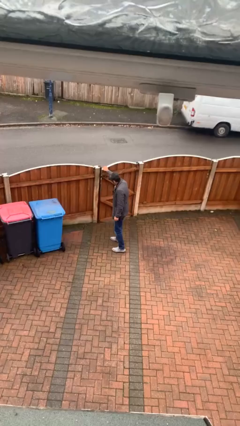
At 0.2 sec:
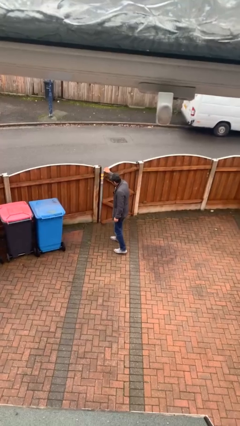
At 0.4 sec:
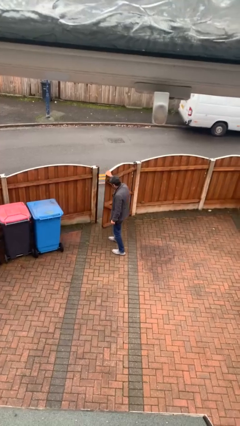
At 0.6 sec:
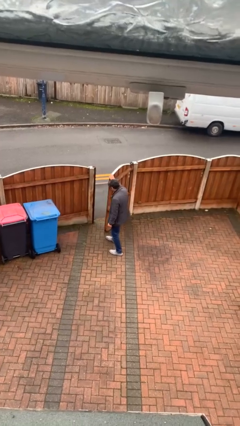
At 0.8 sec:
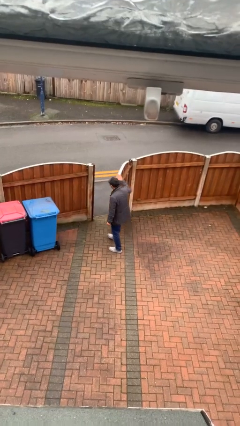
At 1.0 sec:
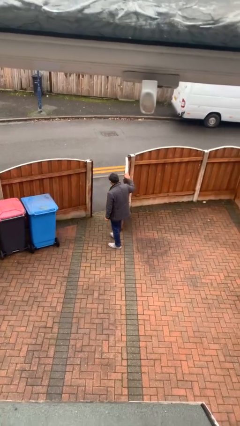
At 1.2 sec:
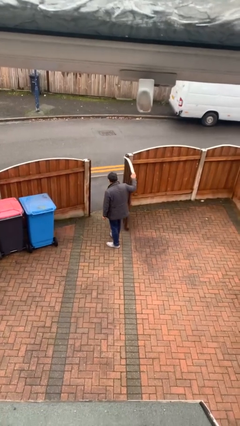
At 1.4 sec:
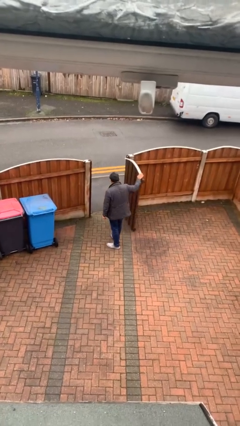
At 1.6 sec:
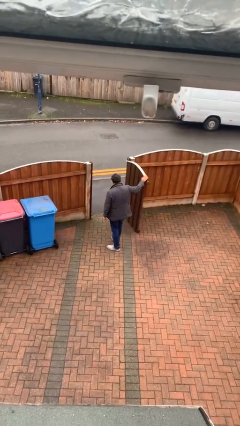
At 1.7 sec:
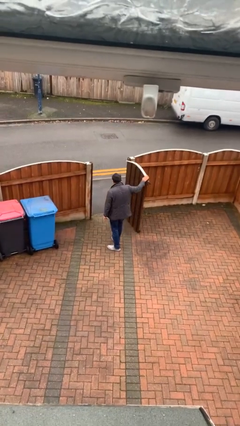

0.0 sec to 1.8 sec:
person opens facility door

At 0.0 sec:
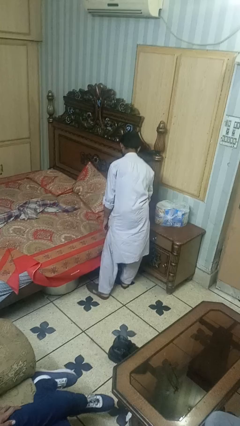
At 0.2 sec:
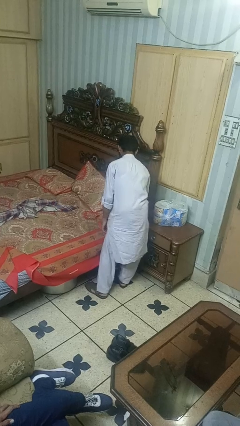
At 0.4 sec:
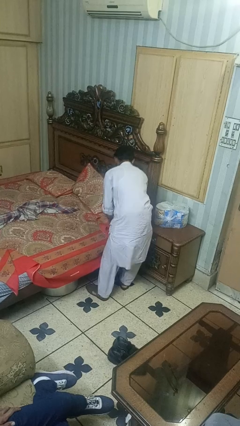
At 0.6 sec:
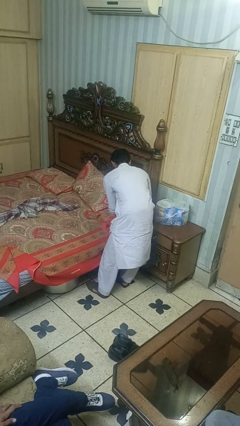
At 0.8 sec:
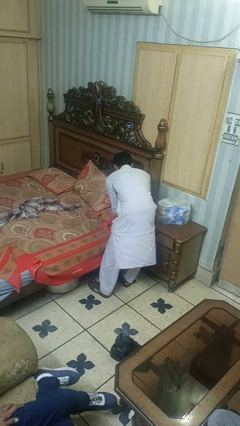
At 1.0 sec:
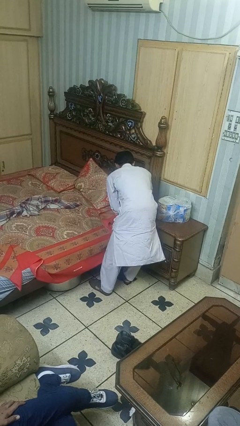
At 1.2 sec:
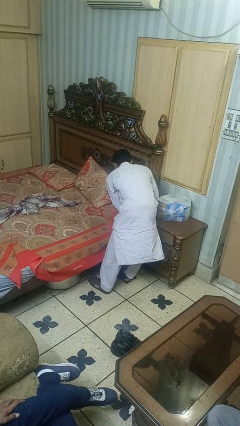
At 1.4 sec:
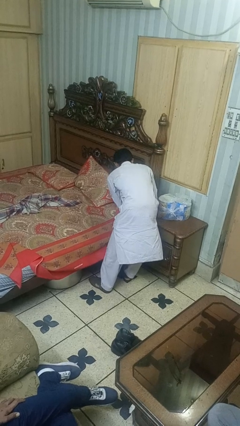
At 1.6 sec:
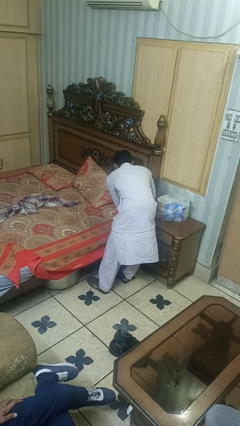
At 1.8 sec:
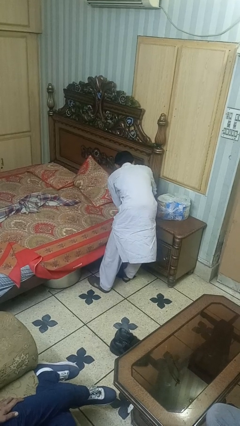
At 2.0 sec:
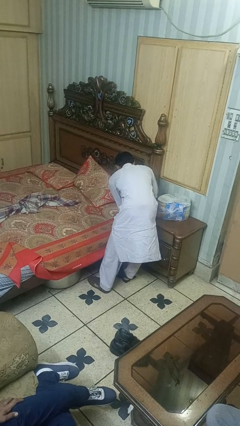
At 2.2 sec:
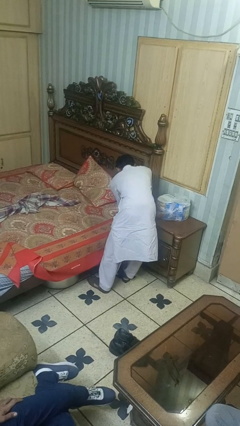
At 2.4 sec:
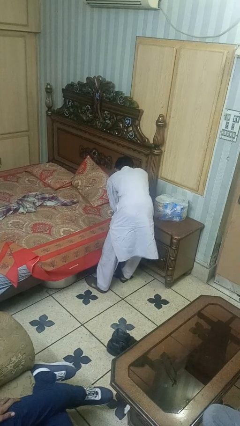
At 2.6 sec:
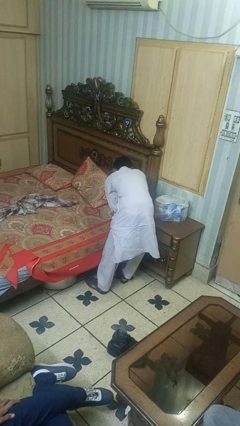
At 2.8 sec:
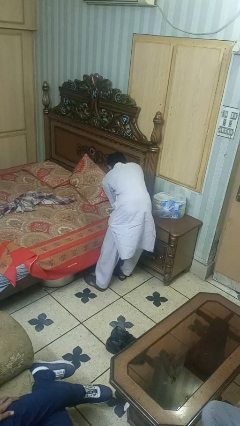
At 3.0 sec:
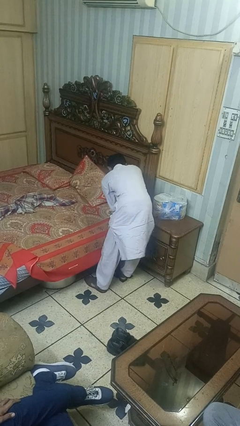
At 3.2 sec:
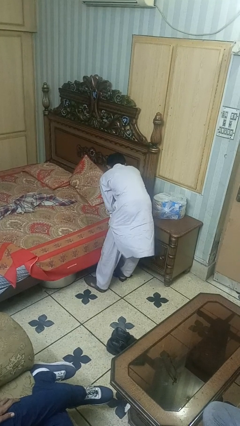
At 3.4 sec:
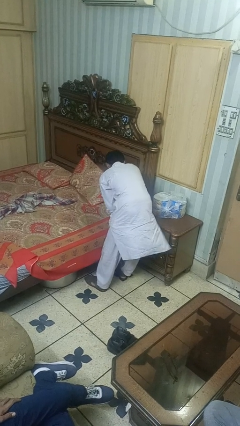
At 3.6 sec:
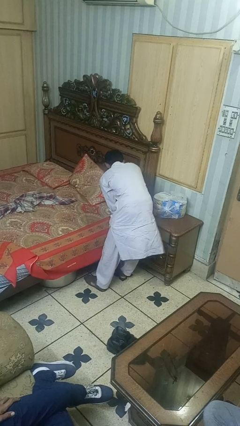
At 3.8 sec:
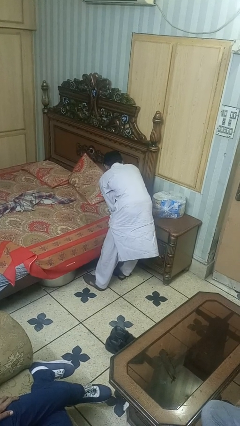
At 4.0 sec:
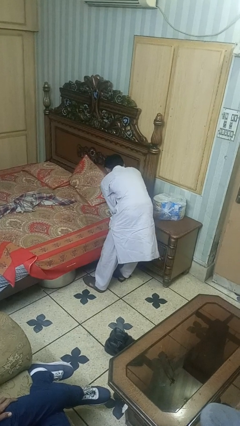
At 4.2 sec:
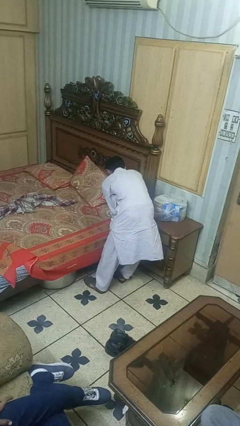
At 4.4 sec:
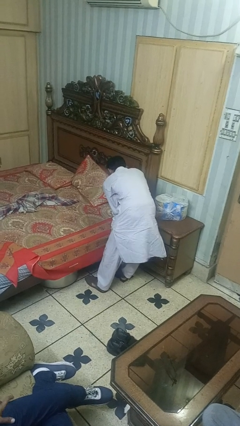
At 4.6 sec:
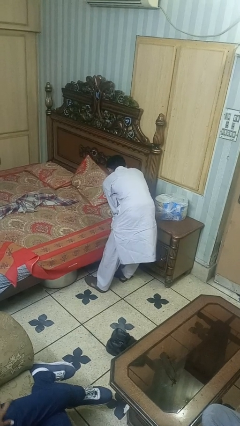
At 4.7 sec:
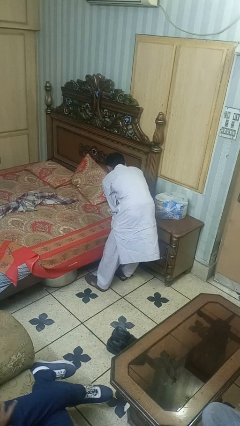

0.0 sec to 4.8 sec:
person makes bed

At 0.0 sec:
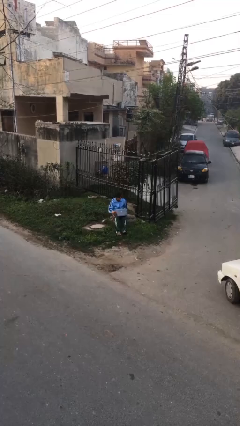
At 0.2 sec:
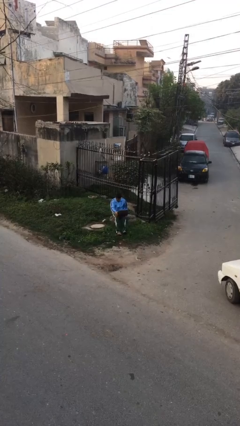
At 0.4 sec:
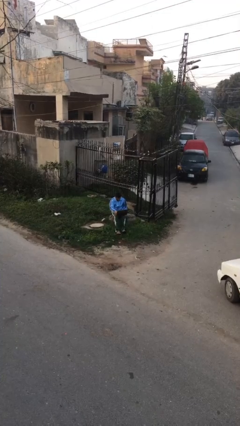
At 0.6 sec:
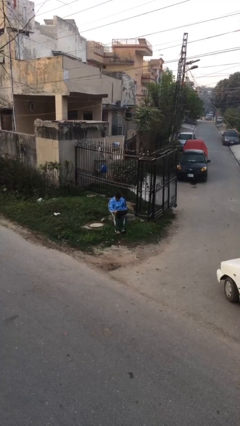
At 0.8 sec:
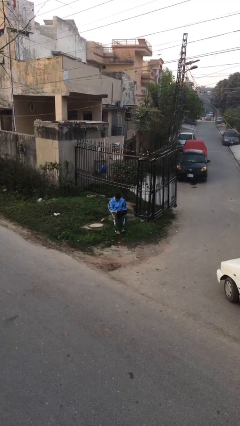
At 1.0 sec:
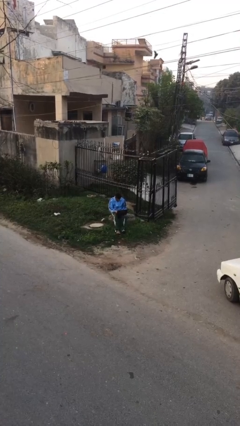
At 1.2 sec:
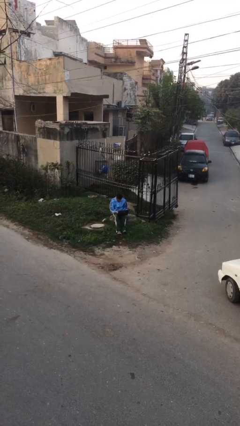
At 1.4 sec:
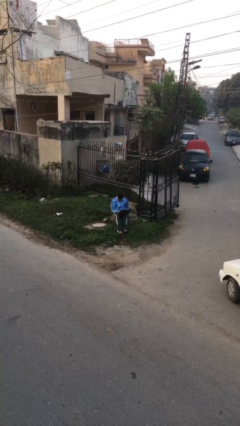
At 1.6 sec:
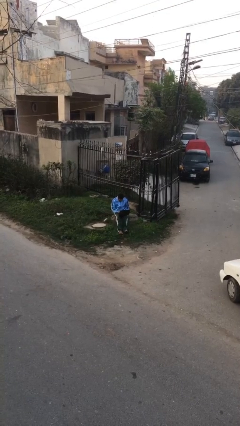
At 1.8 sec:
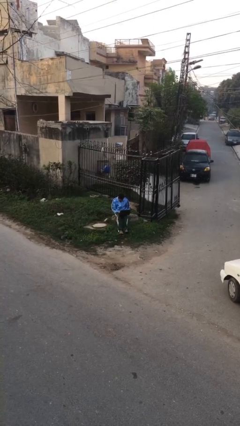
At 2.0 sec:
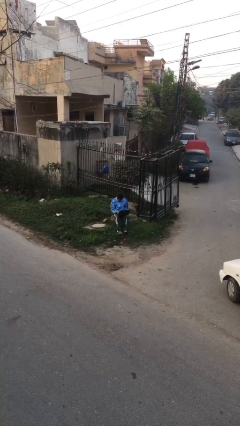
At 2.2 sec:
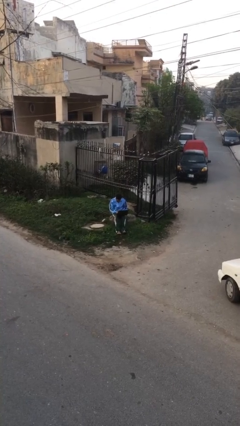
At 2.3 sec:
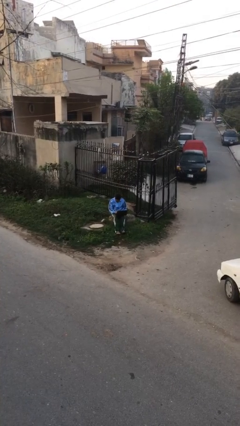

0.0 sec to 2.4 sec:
person interacts with laptop

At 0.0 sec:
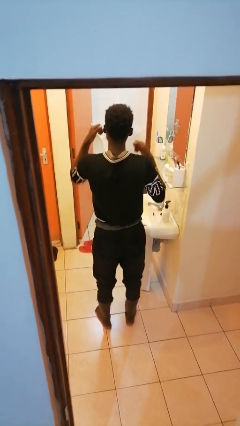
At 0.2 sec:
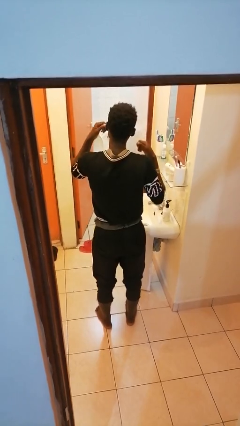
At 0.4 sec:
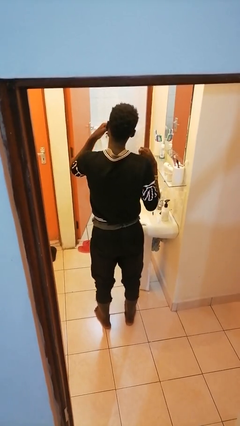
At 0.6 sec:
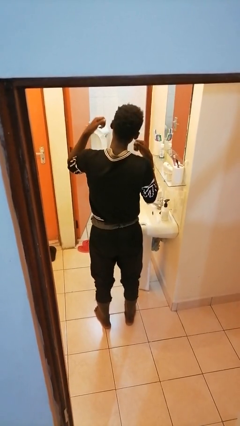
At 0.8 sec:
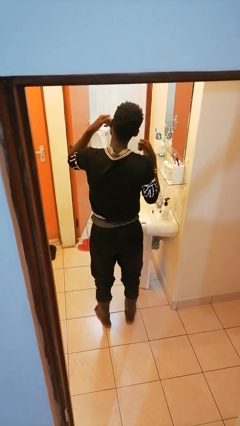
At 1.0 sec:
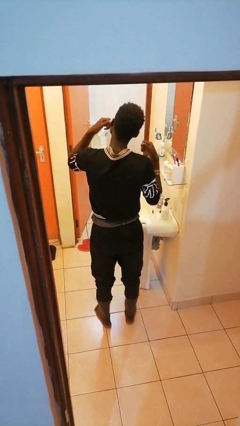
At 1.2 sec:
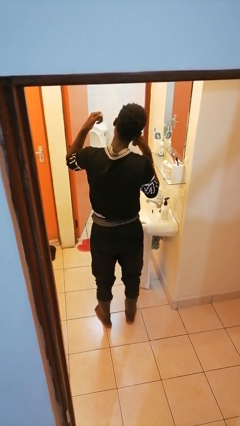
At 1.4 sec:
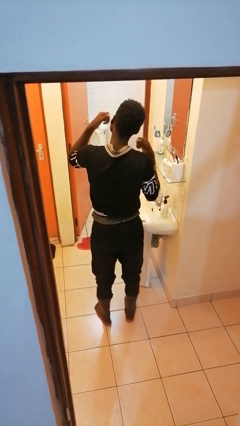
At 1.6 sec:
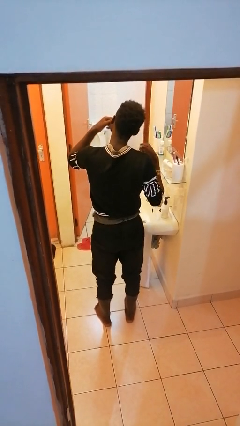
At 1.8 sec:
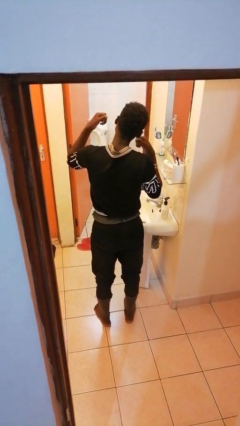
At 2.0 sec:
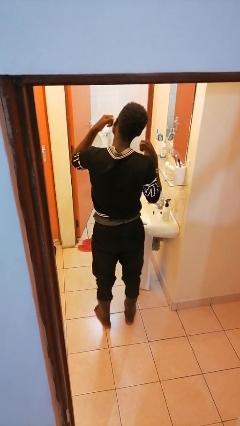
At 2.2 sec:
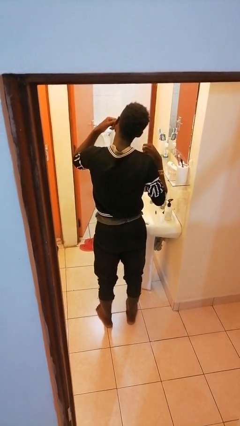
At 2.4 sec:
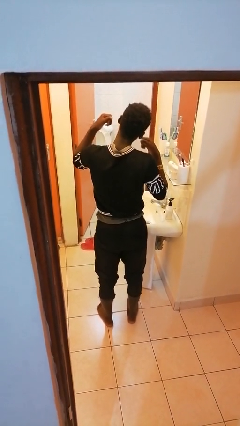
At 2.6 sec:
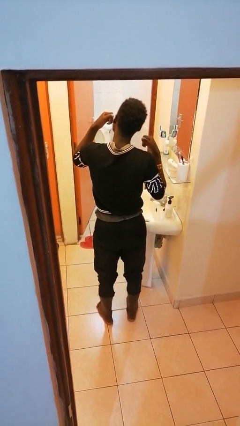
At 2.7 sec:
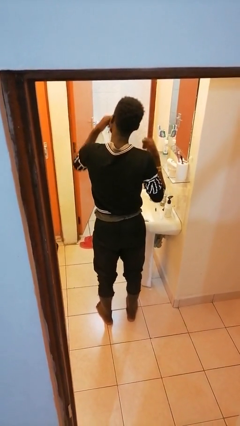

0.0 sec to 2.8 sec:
person flosses

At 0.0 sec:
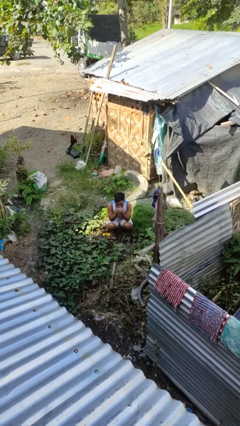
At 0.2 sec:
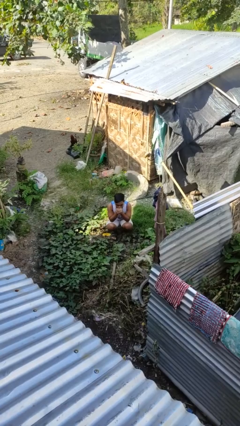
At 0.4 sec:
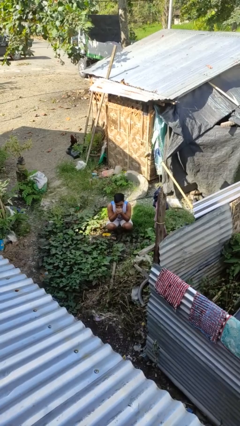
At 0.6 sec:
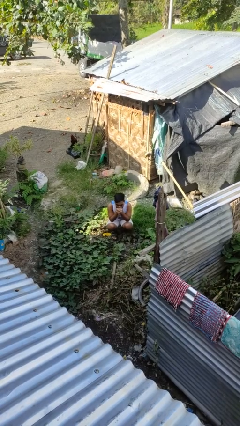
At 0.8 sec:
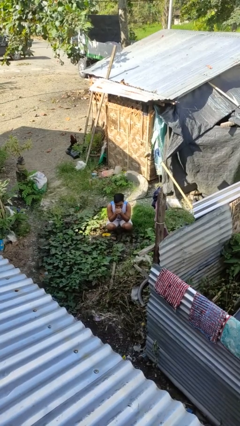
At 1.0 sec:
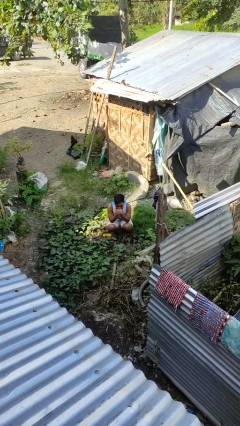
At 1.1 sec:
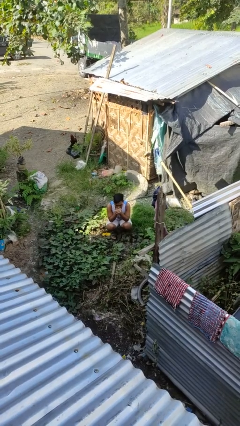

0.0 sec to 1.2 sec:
person blows into hands

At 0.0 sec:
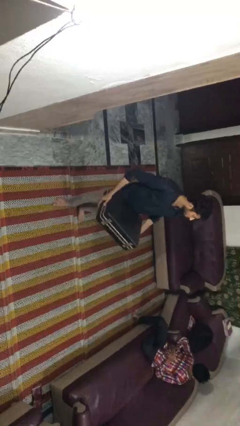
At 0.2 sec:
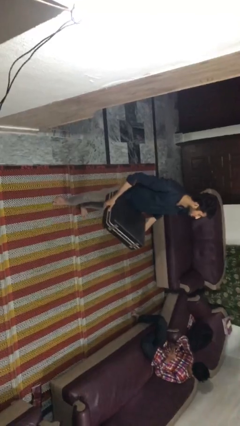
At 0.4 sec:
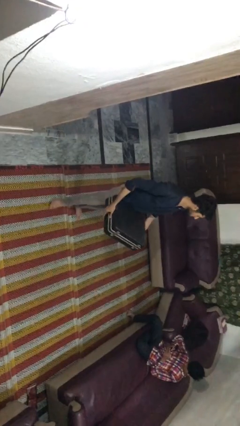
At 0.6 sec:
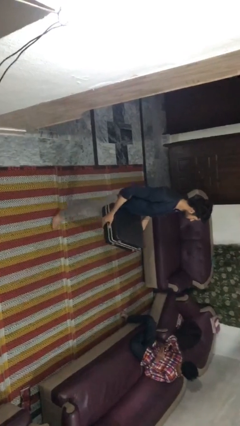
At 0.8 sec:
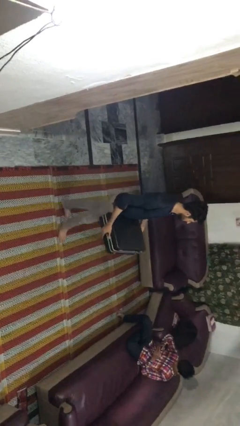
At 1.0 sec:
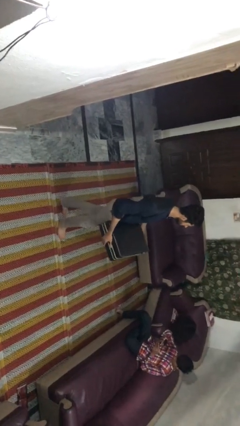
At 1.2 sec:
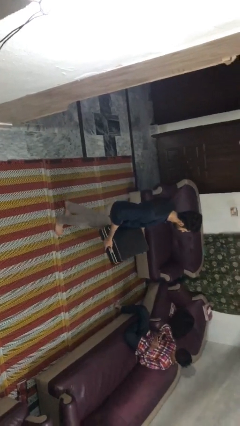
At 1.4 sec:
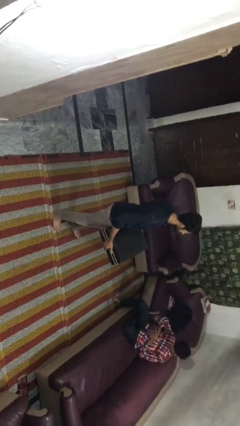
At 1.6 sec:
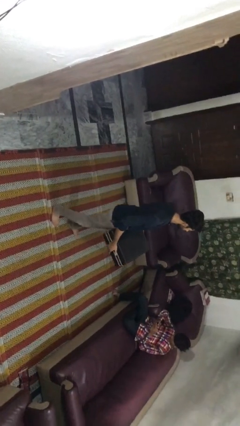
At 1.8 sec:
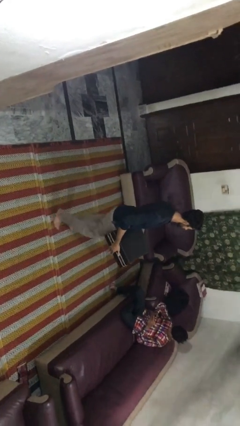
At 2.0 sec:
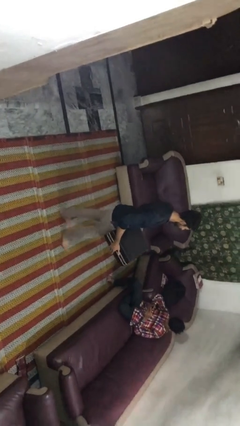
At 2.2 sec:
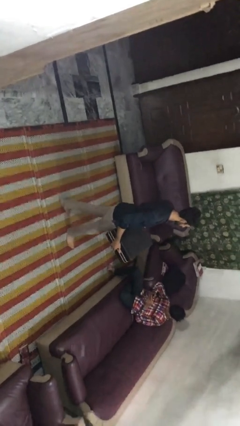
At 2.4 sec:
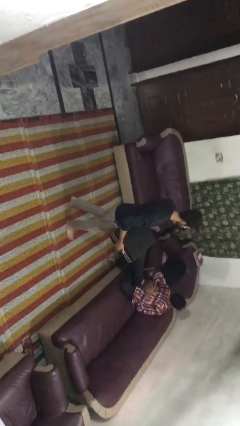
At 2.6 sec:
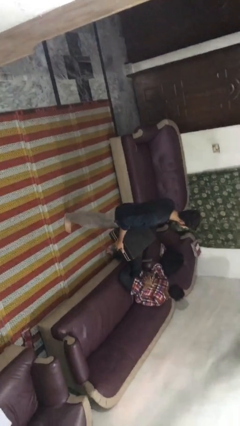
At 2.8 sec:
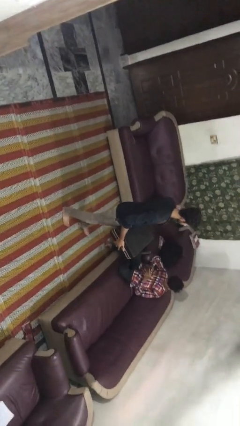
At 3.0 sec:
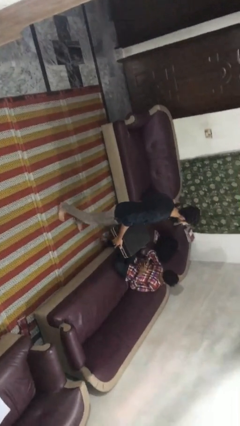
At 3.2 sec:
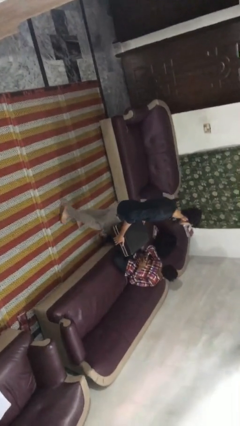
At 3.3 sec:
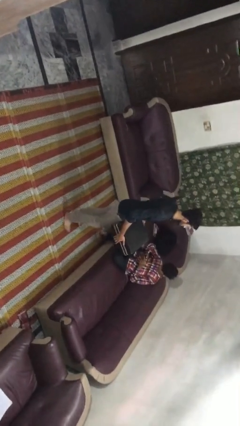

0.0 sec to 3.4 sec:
person carries heavy object

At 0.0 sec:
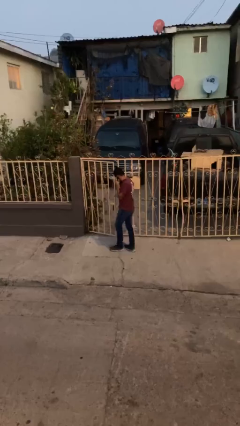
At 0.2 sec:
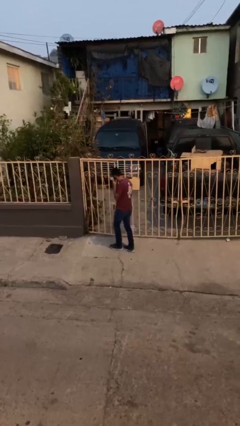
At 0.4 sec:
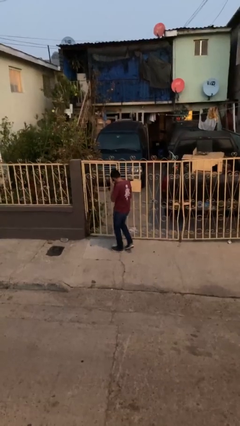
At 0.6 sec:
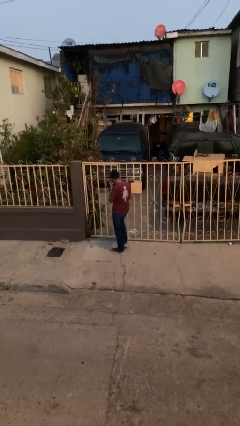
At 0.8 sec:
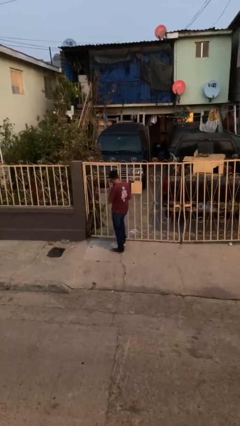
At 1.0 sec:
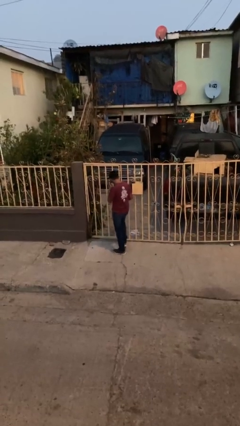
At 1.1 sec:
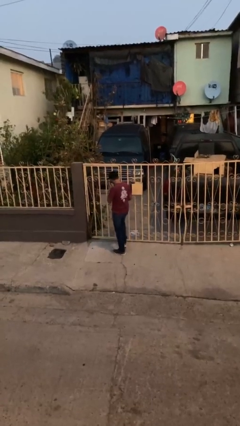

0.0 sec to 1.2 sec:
person closes facility door
